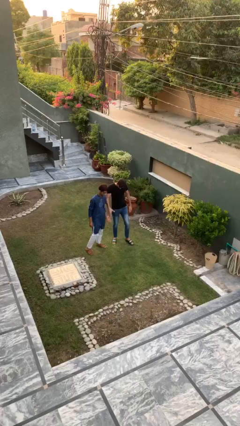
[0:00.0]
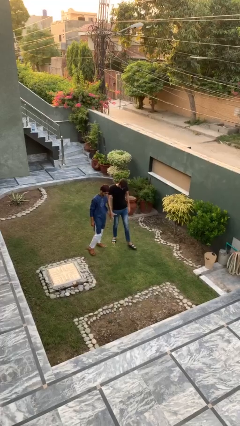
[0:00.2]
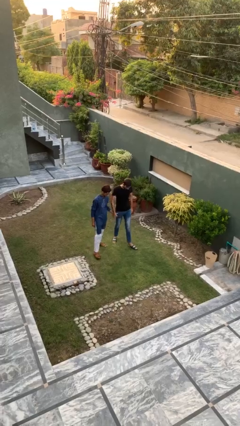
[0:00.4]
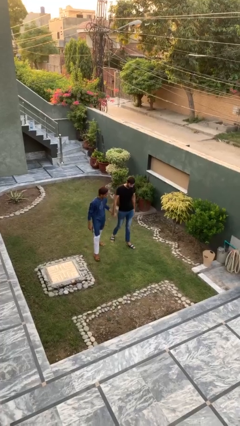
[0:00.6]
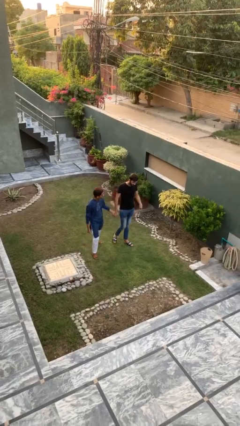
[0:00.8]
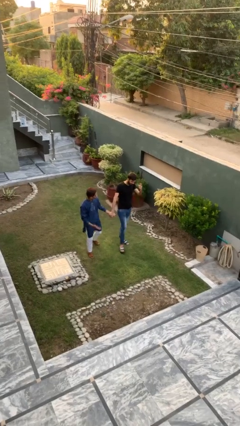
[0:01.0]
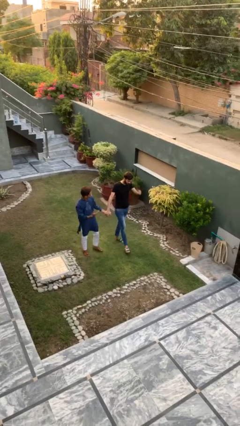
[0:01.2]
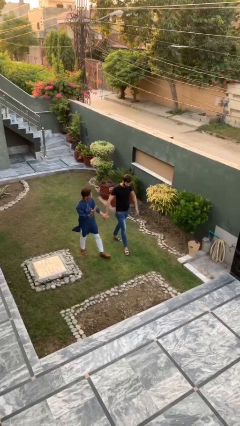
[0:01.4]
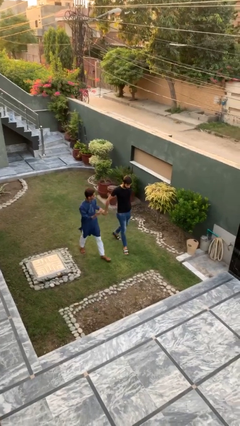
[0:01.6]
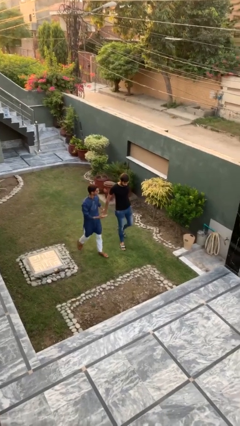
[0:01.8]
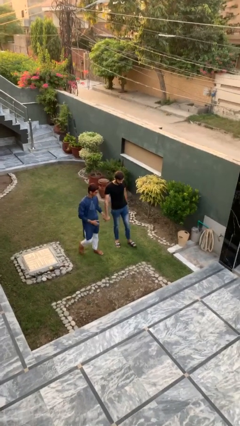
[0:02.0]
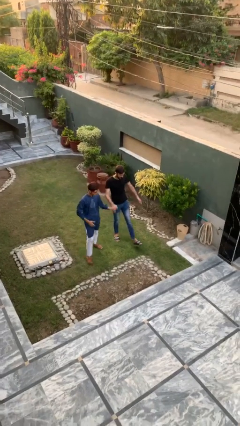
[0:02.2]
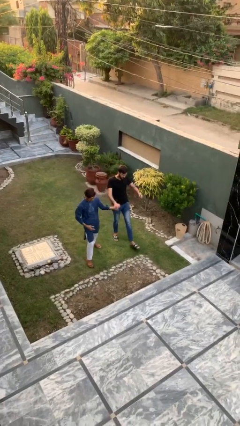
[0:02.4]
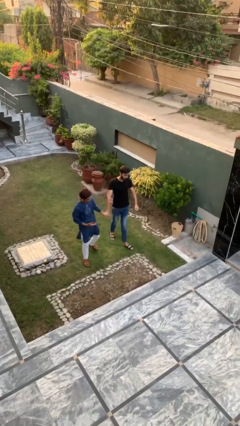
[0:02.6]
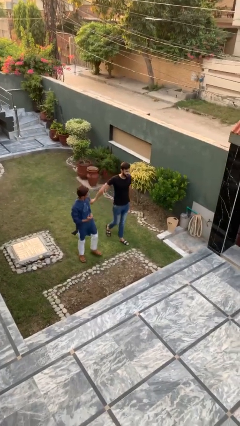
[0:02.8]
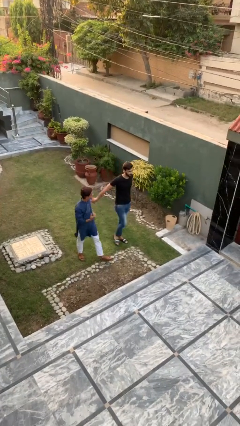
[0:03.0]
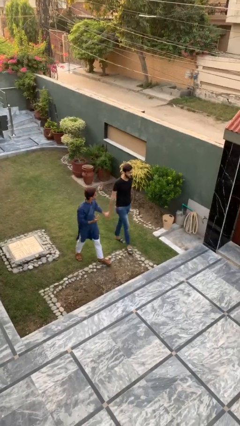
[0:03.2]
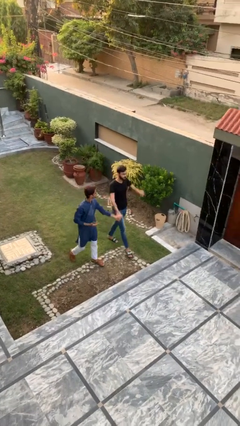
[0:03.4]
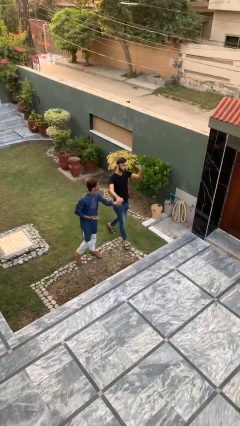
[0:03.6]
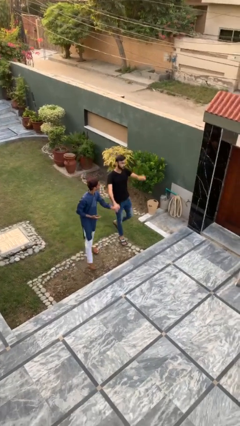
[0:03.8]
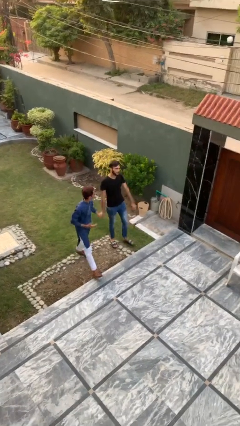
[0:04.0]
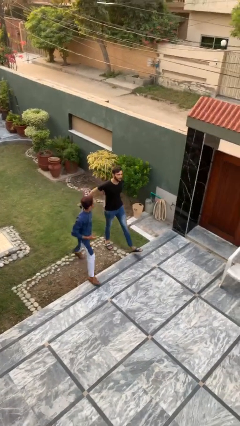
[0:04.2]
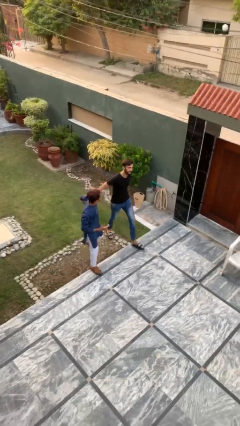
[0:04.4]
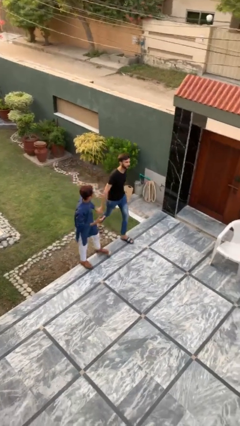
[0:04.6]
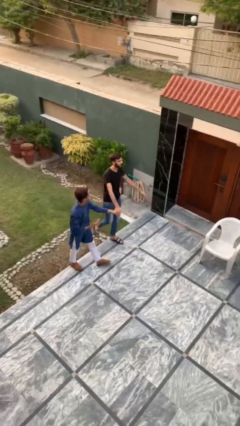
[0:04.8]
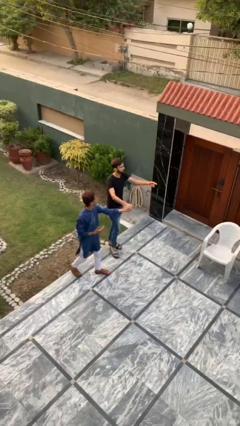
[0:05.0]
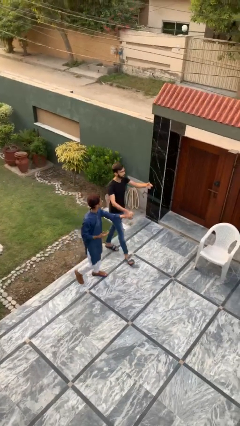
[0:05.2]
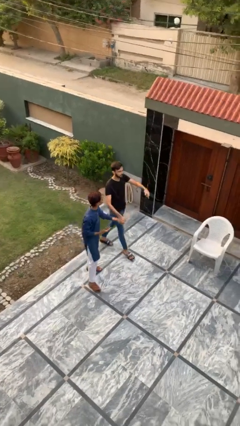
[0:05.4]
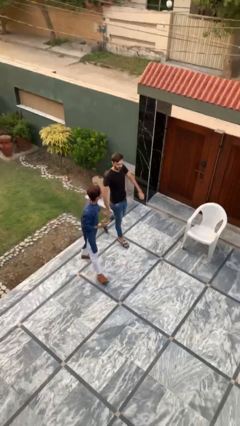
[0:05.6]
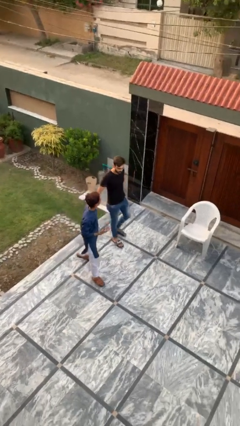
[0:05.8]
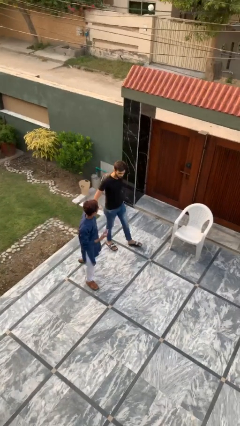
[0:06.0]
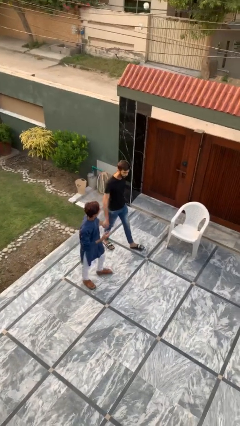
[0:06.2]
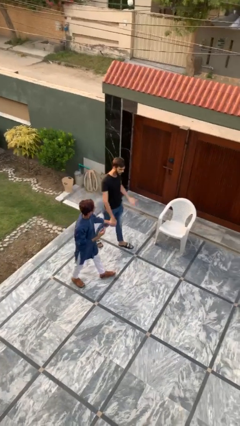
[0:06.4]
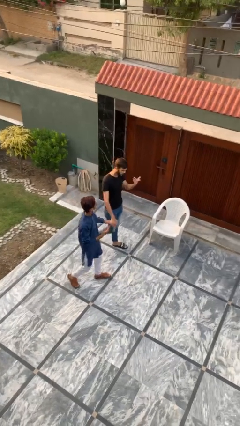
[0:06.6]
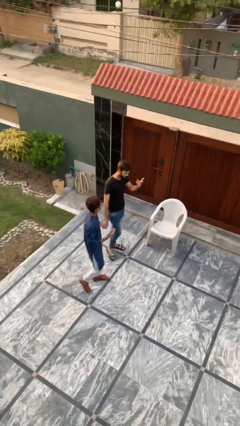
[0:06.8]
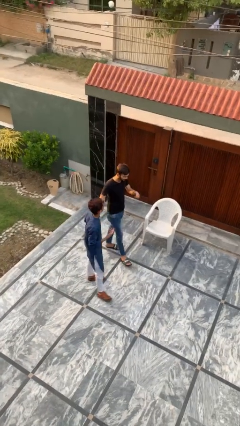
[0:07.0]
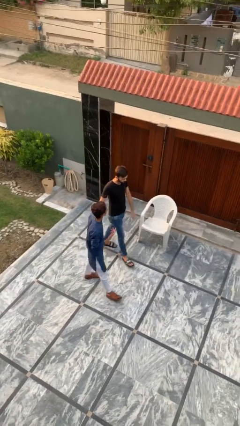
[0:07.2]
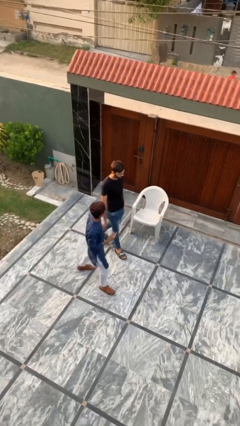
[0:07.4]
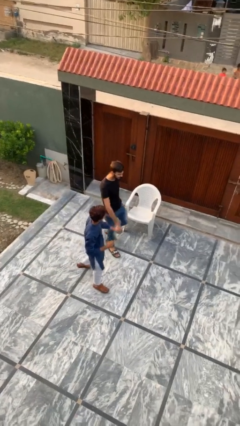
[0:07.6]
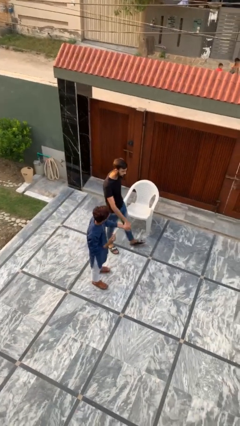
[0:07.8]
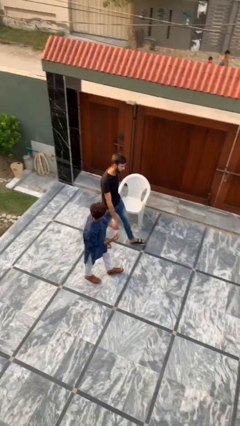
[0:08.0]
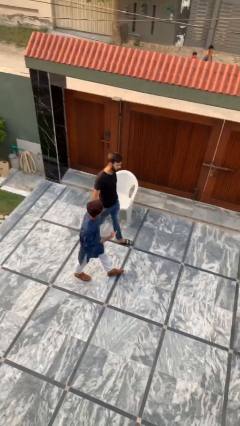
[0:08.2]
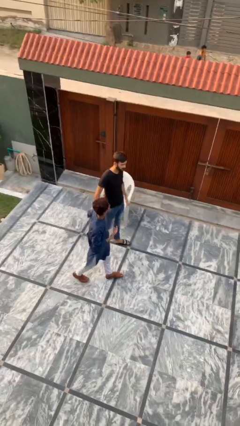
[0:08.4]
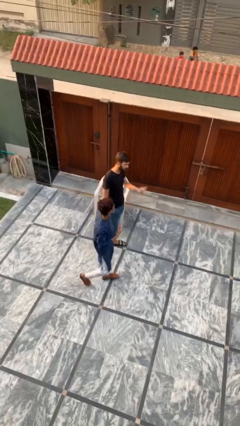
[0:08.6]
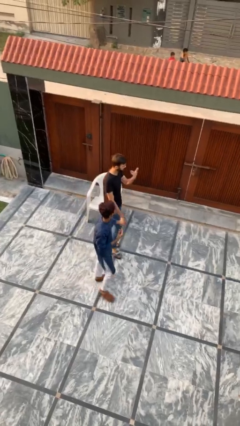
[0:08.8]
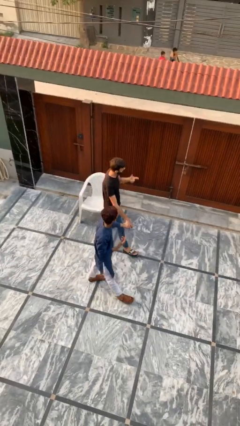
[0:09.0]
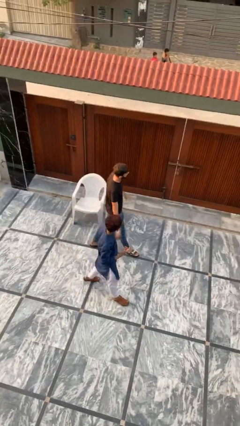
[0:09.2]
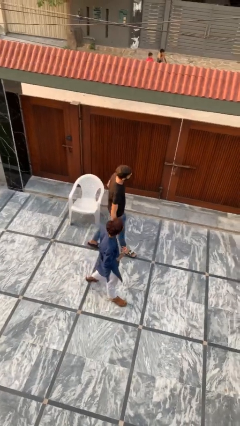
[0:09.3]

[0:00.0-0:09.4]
person holds hand

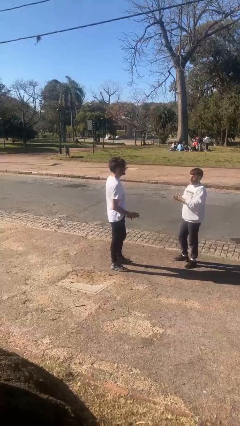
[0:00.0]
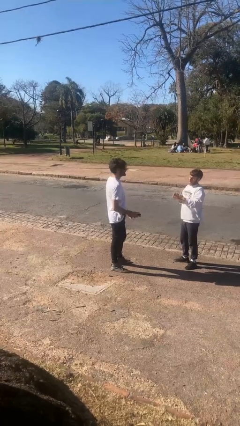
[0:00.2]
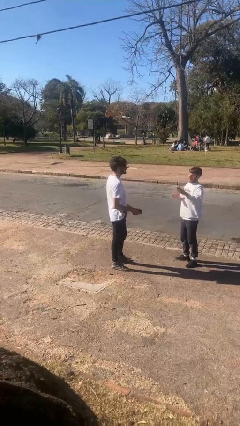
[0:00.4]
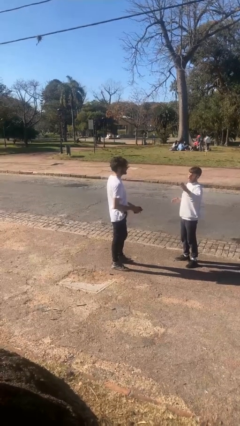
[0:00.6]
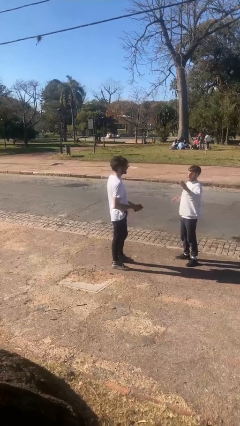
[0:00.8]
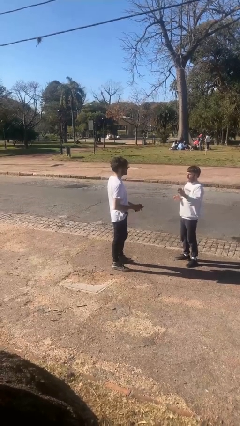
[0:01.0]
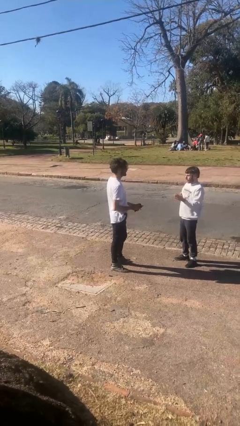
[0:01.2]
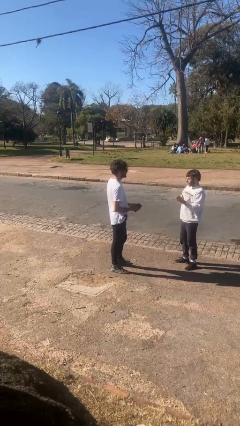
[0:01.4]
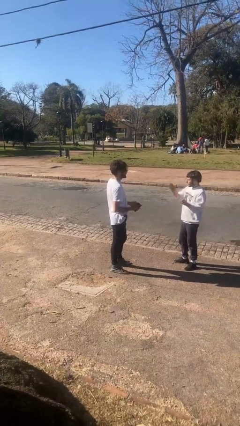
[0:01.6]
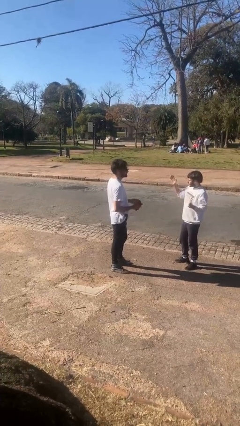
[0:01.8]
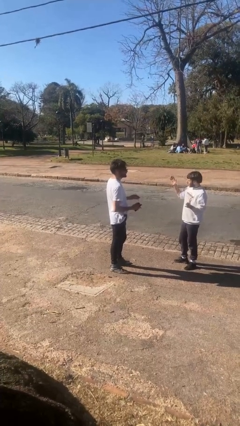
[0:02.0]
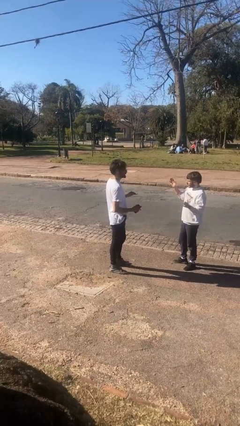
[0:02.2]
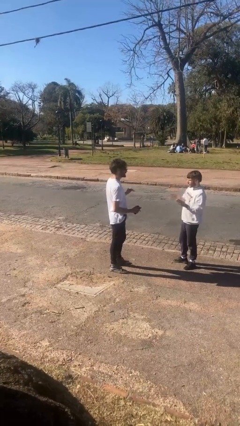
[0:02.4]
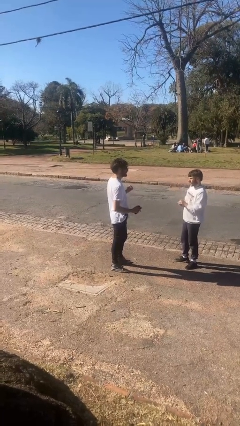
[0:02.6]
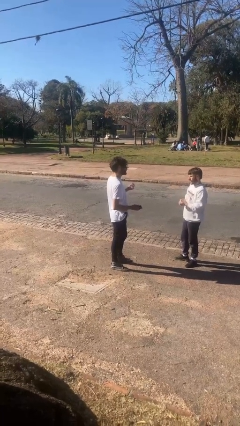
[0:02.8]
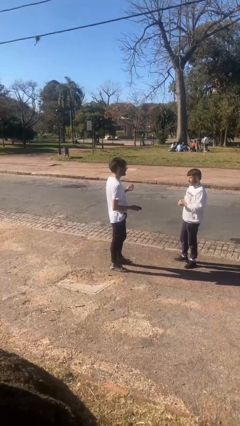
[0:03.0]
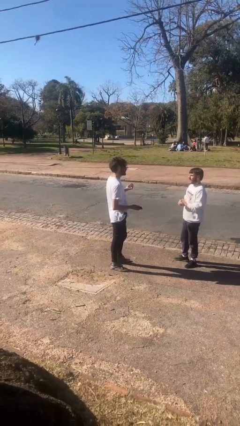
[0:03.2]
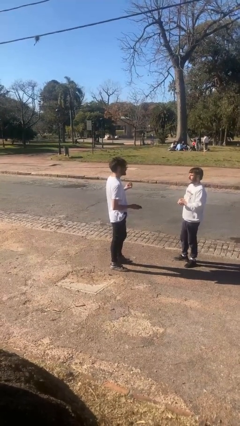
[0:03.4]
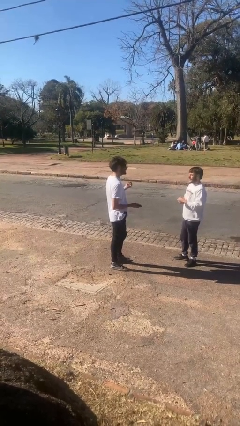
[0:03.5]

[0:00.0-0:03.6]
person talks to person

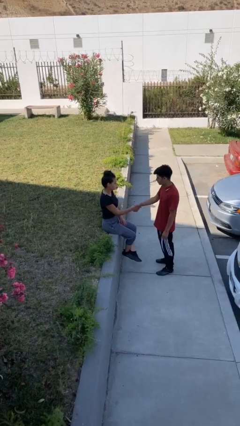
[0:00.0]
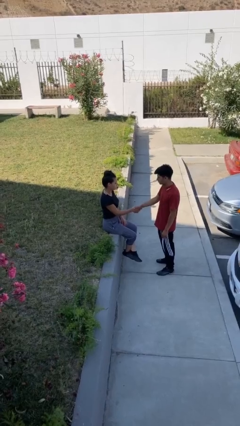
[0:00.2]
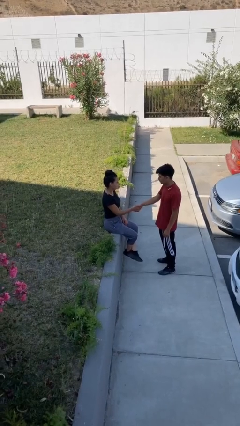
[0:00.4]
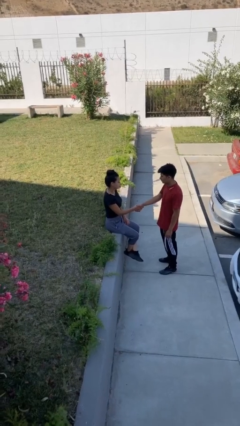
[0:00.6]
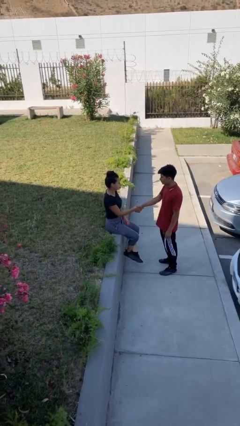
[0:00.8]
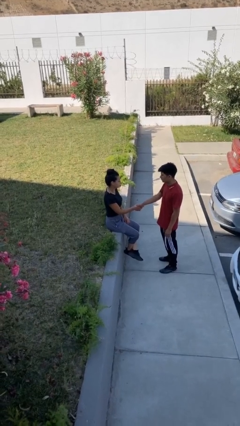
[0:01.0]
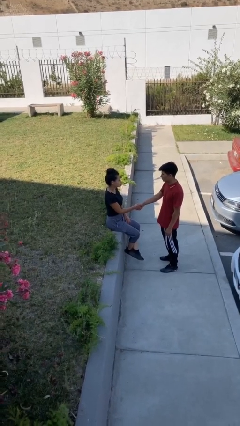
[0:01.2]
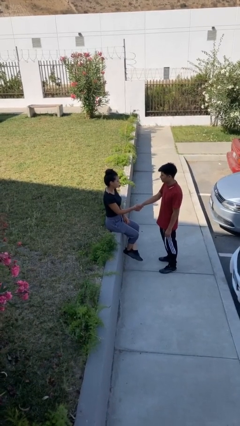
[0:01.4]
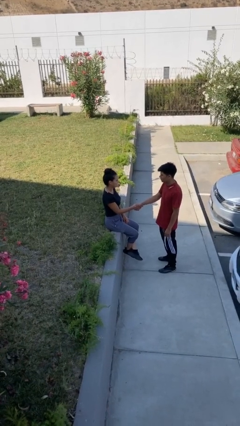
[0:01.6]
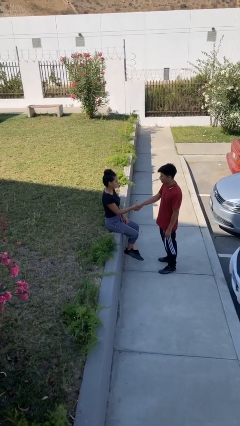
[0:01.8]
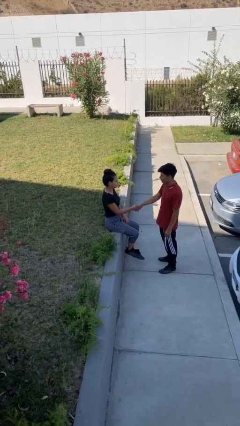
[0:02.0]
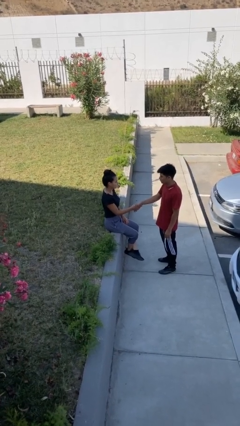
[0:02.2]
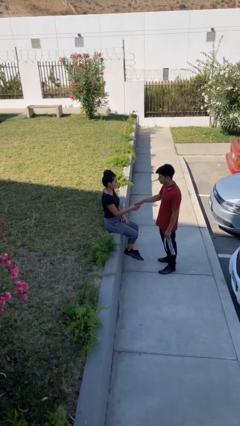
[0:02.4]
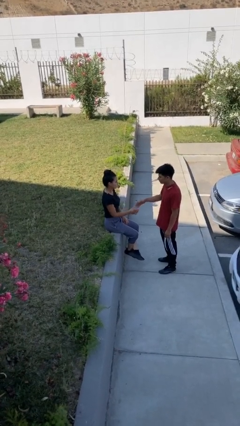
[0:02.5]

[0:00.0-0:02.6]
person shakes hand

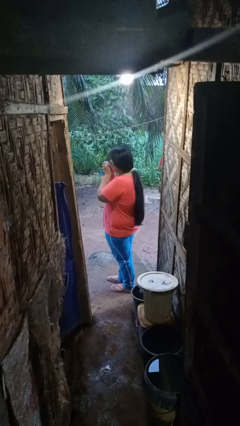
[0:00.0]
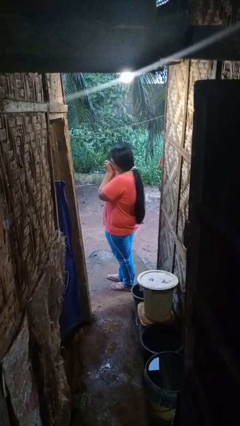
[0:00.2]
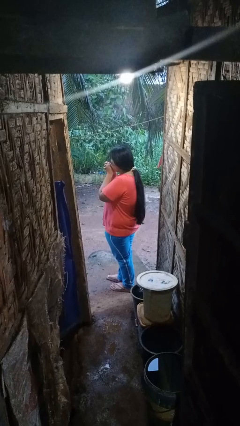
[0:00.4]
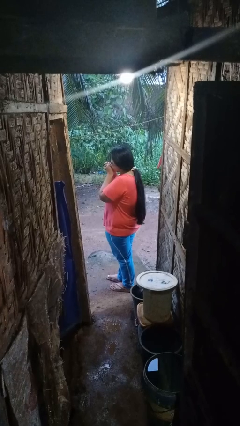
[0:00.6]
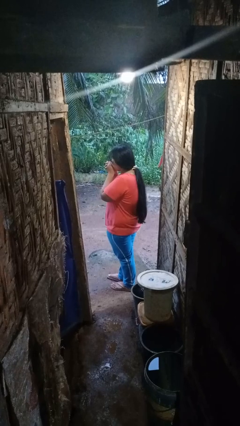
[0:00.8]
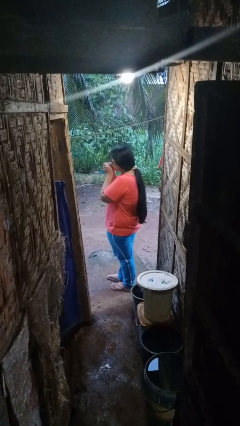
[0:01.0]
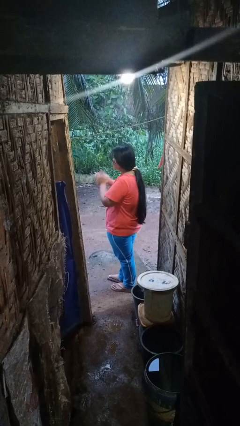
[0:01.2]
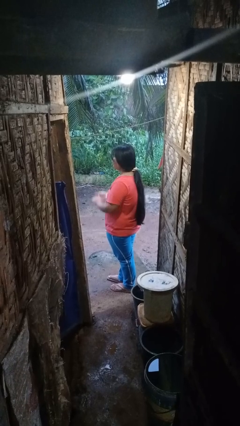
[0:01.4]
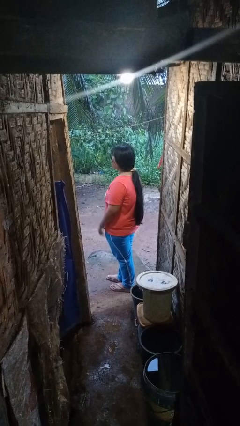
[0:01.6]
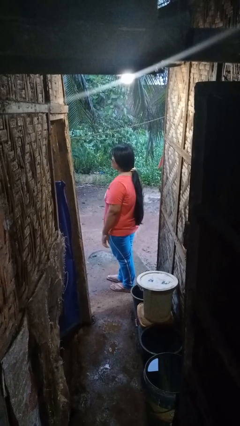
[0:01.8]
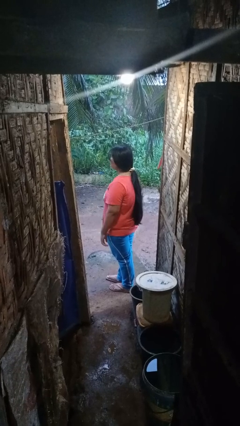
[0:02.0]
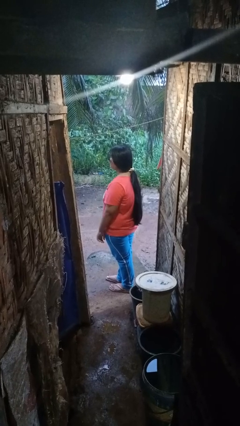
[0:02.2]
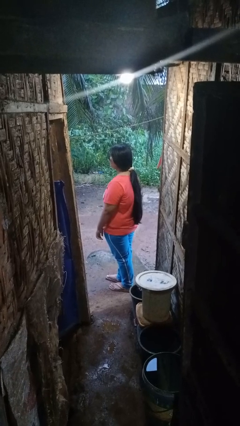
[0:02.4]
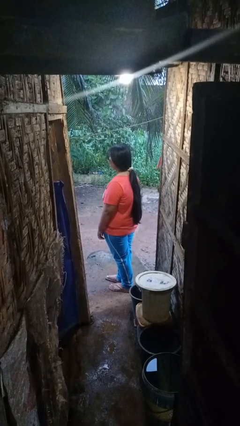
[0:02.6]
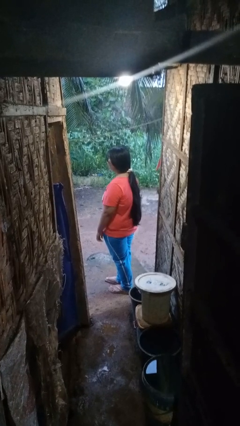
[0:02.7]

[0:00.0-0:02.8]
person blows into hands
